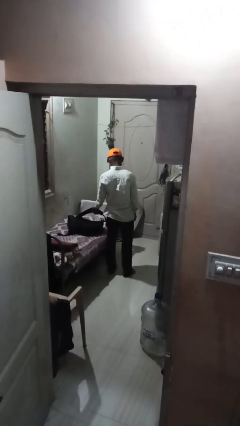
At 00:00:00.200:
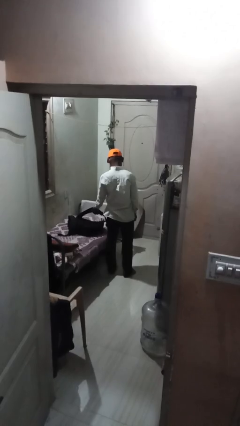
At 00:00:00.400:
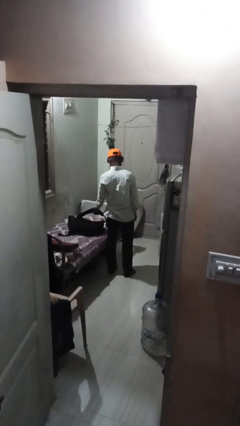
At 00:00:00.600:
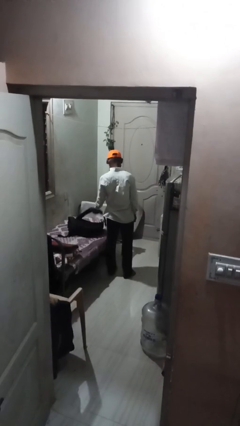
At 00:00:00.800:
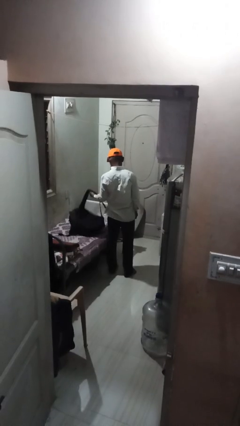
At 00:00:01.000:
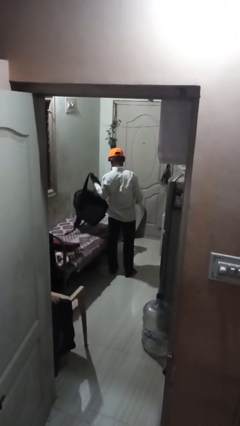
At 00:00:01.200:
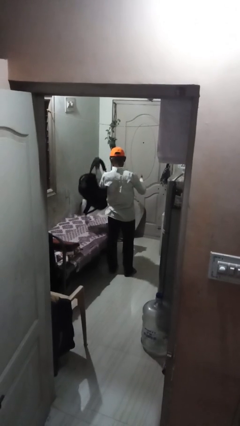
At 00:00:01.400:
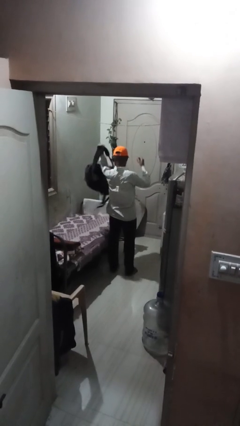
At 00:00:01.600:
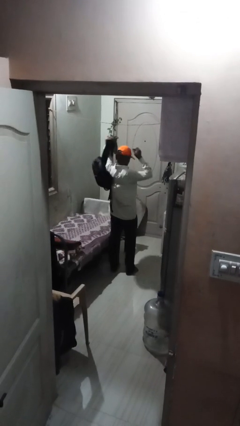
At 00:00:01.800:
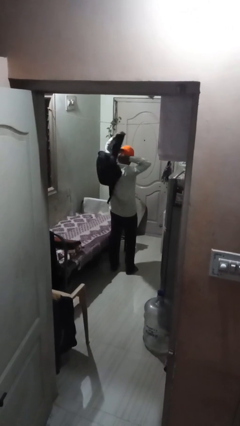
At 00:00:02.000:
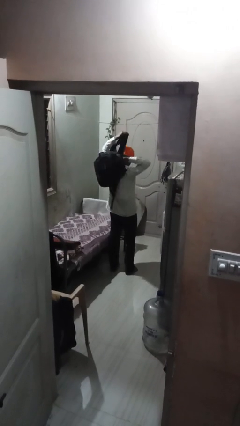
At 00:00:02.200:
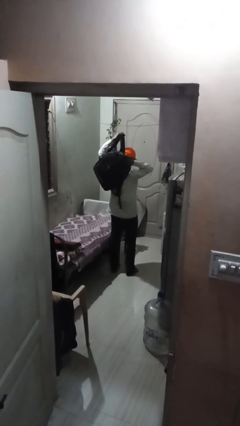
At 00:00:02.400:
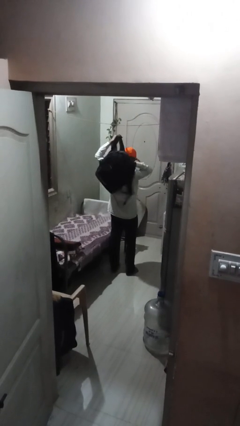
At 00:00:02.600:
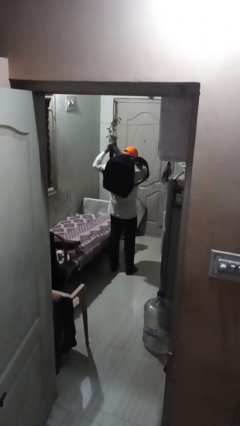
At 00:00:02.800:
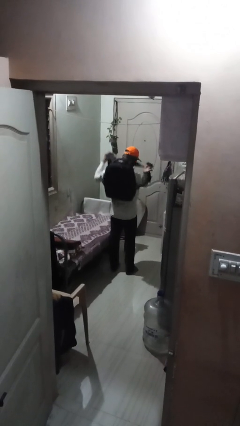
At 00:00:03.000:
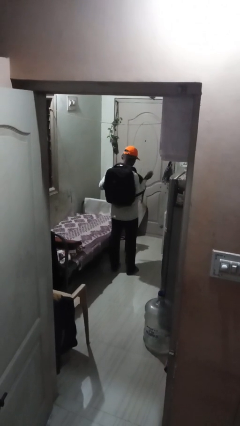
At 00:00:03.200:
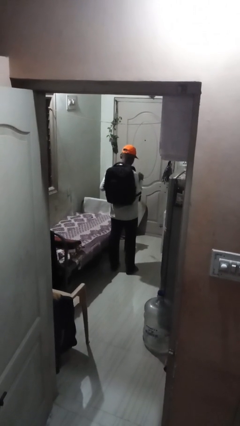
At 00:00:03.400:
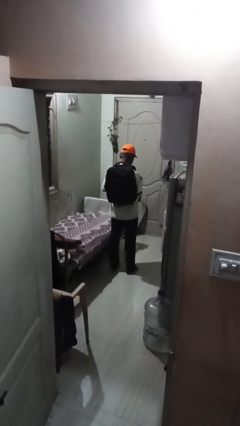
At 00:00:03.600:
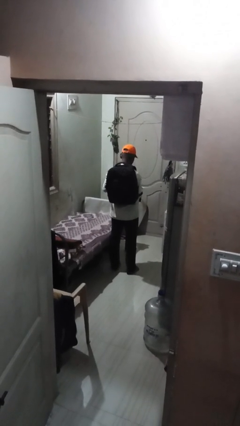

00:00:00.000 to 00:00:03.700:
person puts on backpack

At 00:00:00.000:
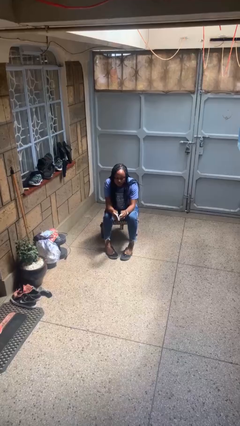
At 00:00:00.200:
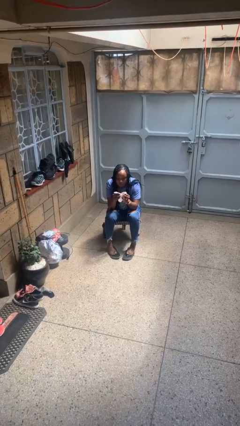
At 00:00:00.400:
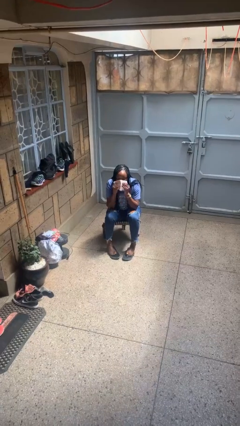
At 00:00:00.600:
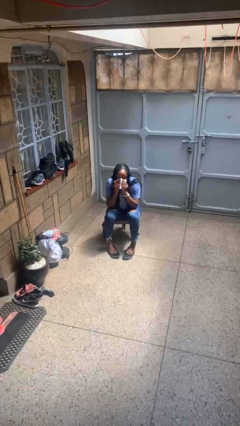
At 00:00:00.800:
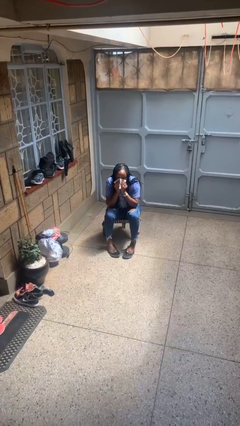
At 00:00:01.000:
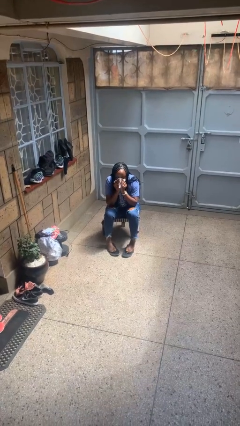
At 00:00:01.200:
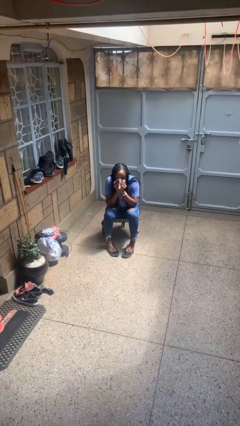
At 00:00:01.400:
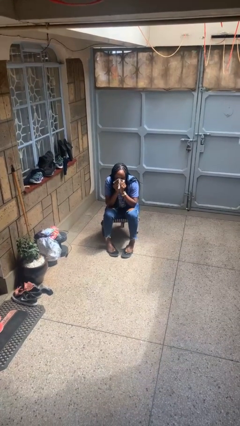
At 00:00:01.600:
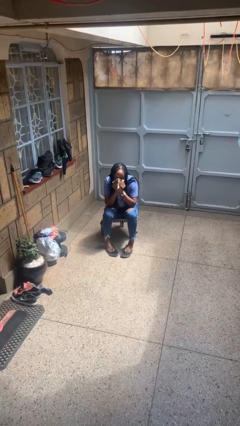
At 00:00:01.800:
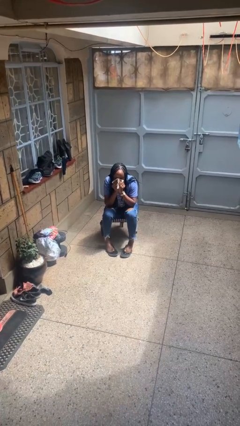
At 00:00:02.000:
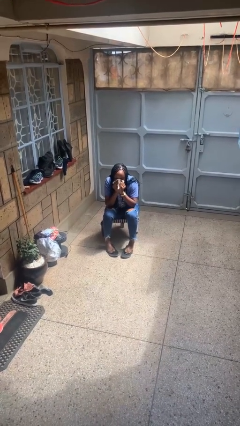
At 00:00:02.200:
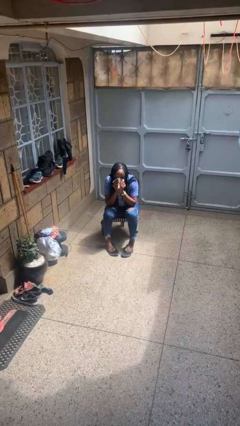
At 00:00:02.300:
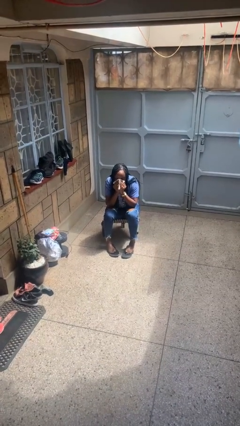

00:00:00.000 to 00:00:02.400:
person blows nose

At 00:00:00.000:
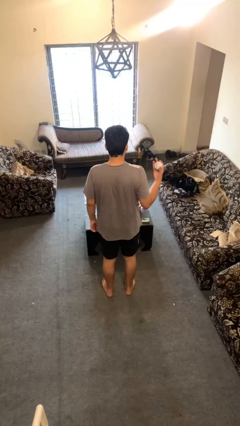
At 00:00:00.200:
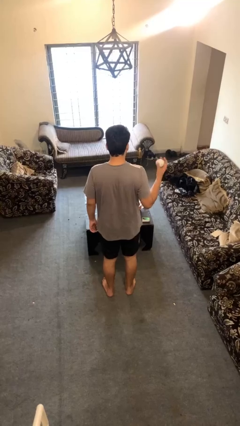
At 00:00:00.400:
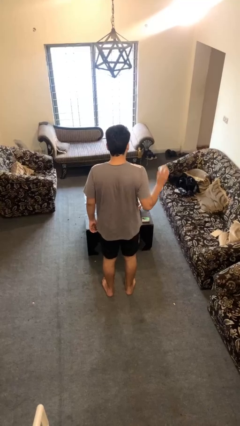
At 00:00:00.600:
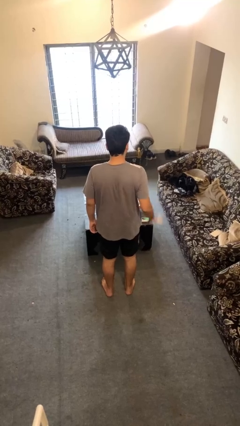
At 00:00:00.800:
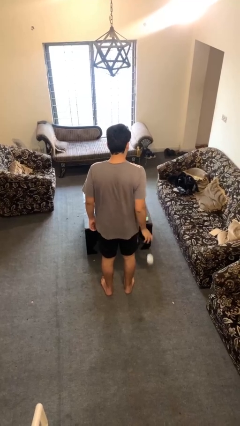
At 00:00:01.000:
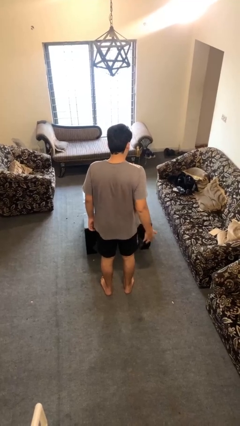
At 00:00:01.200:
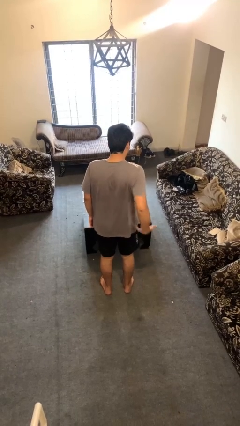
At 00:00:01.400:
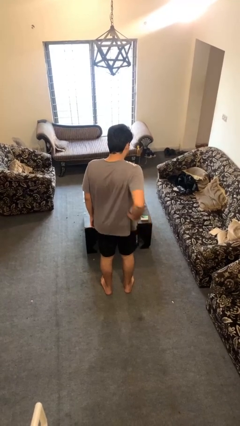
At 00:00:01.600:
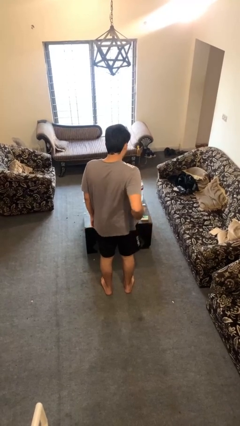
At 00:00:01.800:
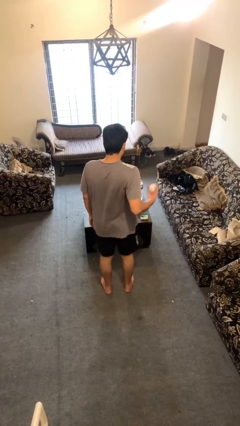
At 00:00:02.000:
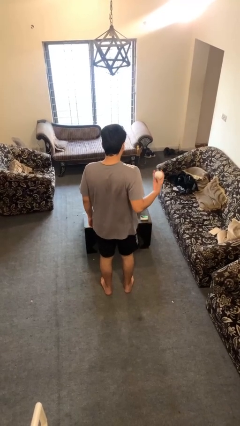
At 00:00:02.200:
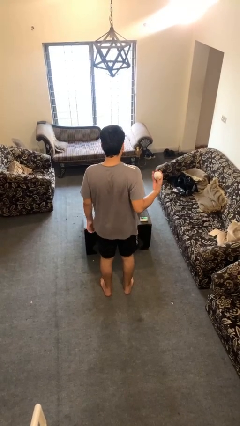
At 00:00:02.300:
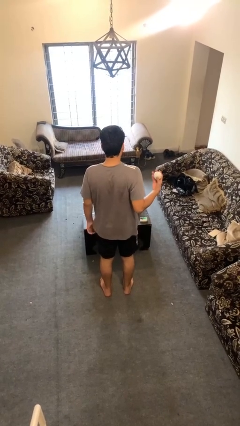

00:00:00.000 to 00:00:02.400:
person bounces ball on floor

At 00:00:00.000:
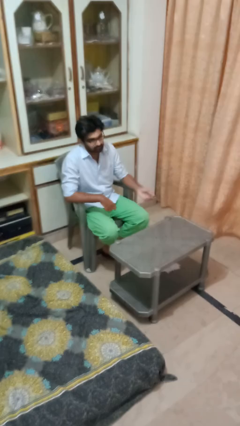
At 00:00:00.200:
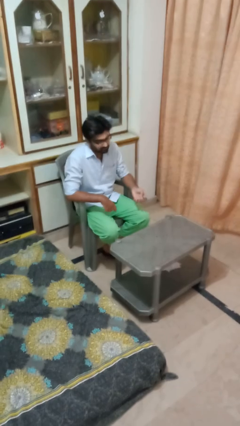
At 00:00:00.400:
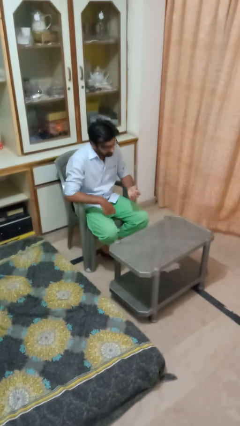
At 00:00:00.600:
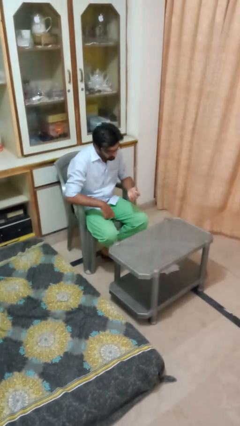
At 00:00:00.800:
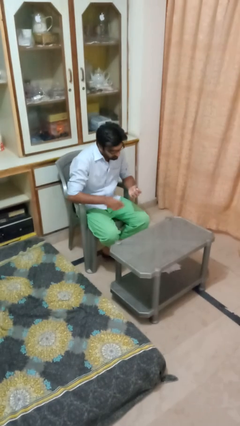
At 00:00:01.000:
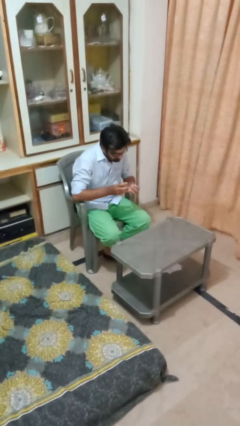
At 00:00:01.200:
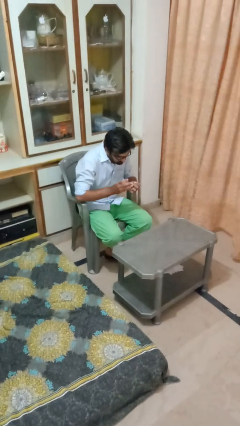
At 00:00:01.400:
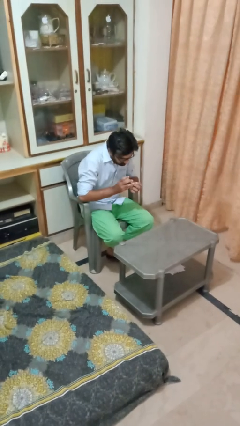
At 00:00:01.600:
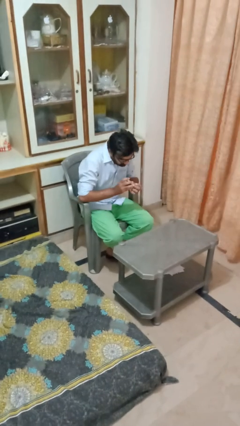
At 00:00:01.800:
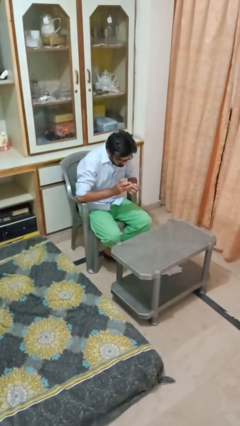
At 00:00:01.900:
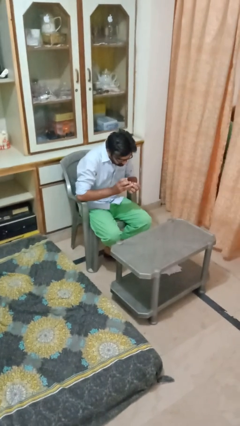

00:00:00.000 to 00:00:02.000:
person clips fingernails

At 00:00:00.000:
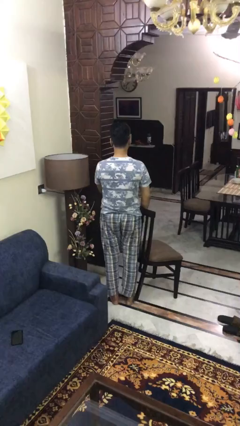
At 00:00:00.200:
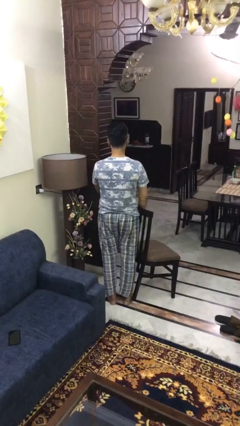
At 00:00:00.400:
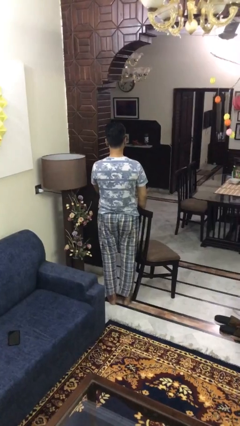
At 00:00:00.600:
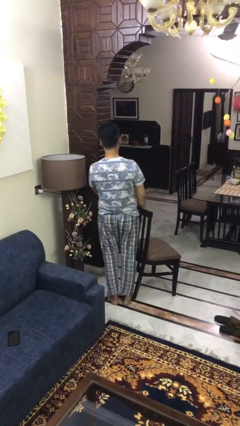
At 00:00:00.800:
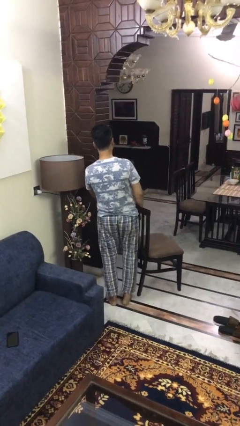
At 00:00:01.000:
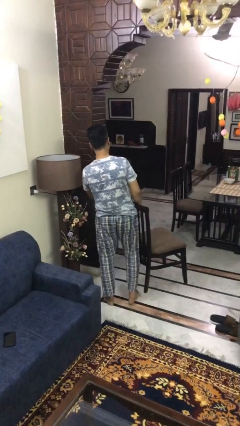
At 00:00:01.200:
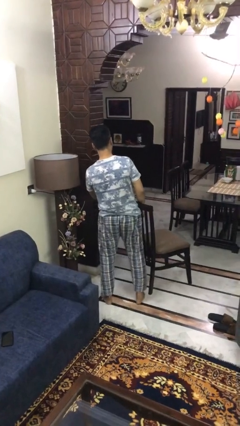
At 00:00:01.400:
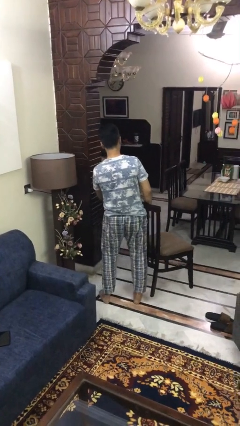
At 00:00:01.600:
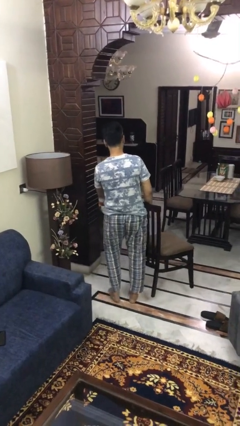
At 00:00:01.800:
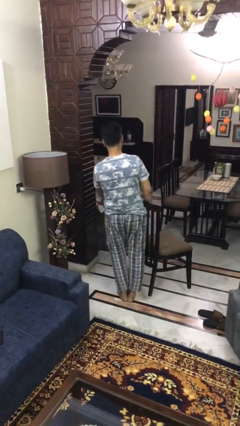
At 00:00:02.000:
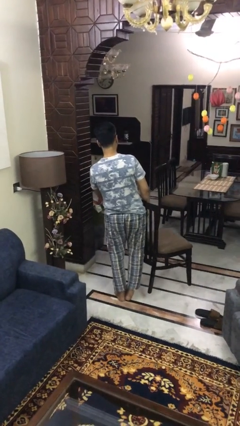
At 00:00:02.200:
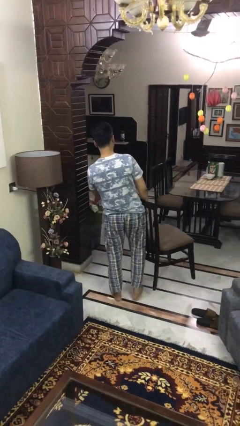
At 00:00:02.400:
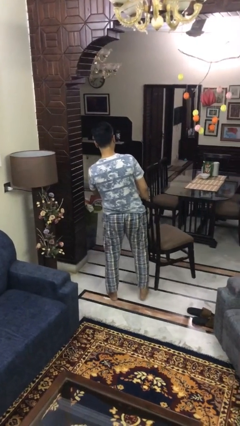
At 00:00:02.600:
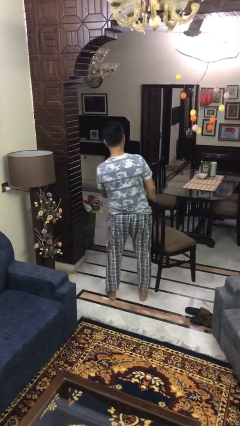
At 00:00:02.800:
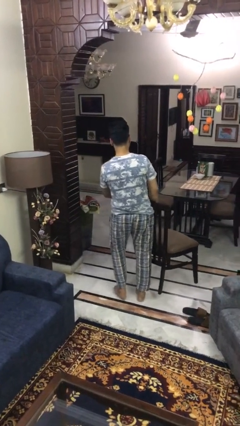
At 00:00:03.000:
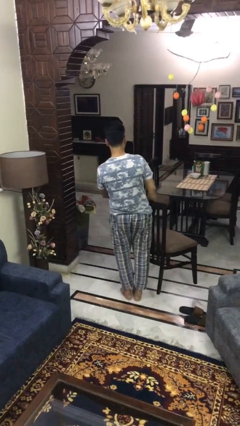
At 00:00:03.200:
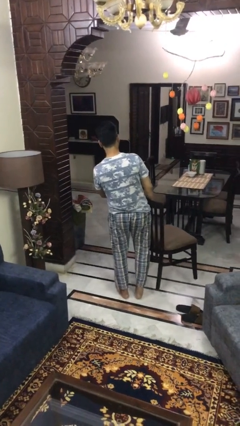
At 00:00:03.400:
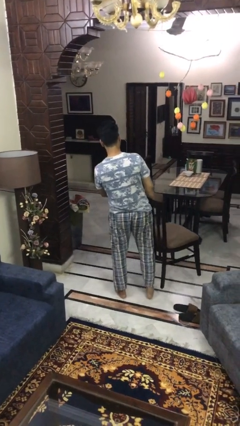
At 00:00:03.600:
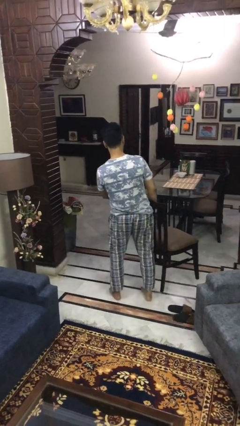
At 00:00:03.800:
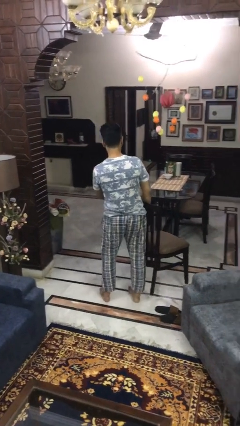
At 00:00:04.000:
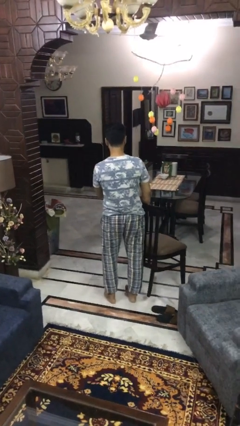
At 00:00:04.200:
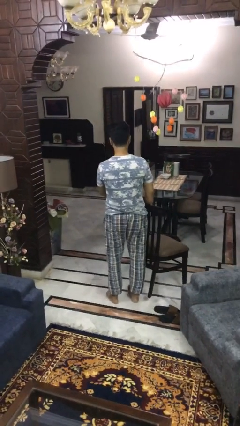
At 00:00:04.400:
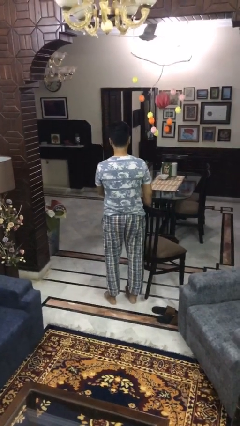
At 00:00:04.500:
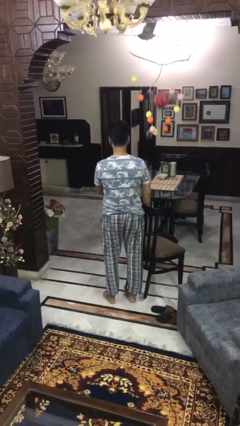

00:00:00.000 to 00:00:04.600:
person carries furniture

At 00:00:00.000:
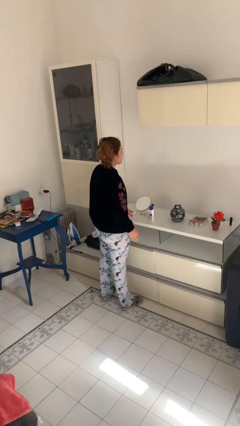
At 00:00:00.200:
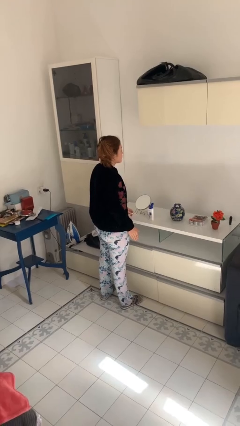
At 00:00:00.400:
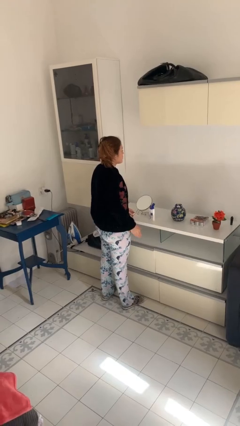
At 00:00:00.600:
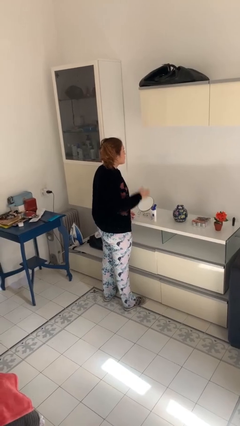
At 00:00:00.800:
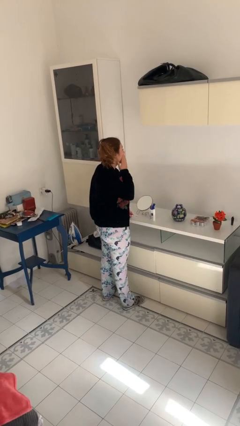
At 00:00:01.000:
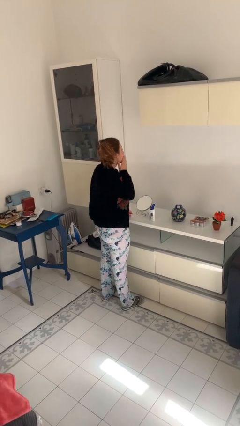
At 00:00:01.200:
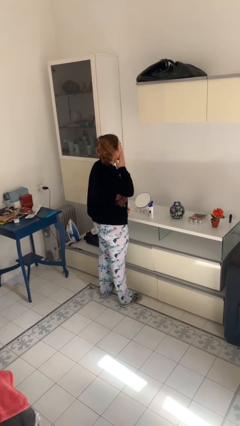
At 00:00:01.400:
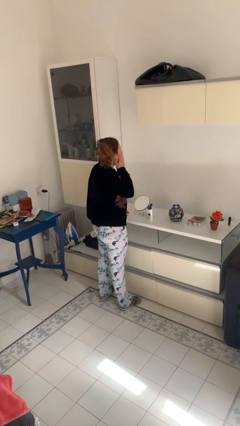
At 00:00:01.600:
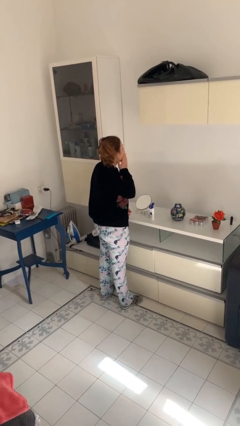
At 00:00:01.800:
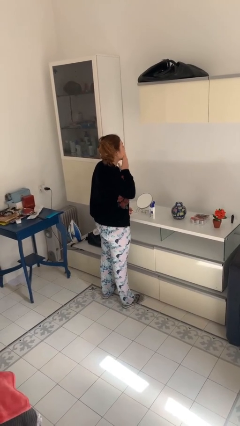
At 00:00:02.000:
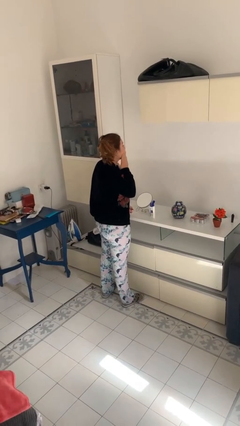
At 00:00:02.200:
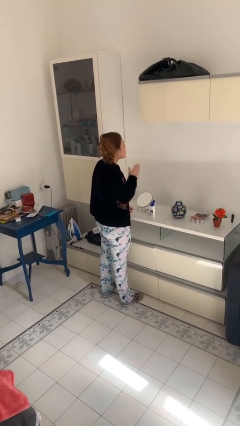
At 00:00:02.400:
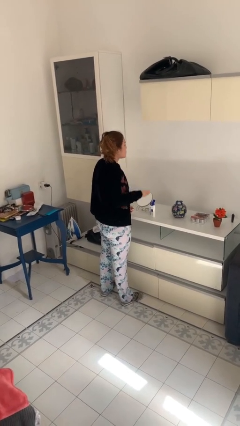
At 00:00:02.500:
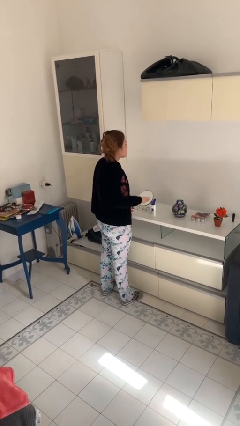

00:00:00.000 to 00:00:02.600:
person applies shaving cream
